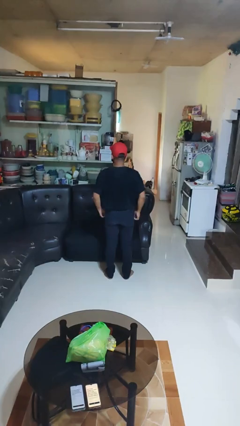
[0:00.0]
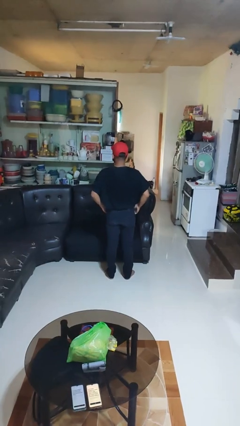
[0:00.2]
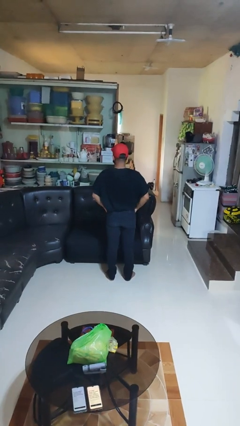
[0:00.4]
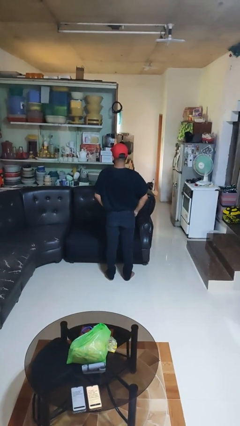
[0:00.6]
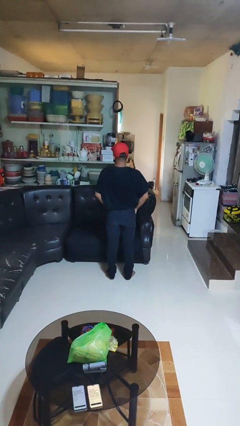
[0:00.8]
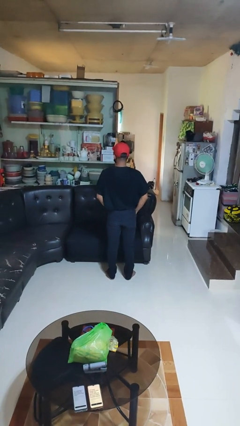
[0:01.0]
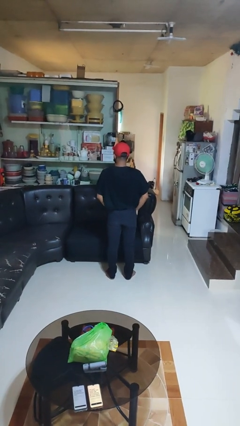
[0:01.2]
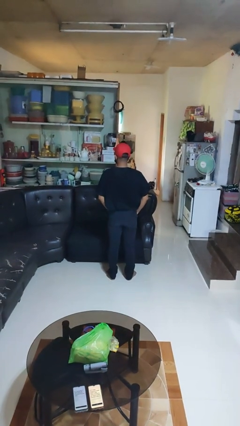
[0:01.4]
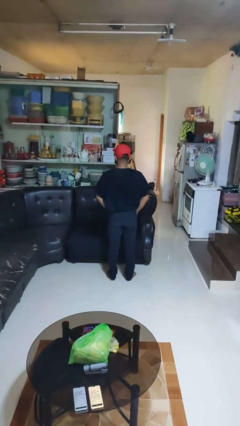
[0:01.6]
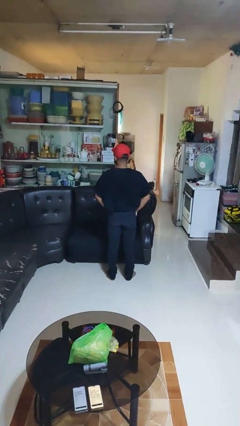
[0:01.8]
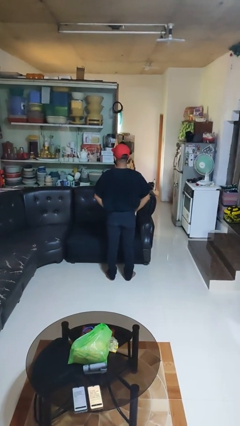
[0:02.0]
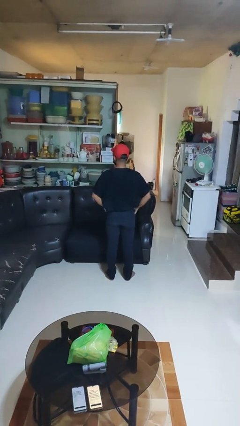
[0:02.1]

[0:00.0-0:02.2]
person puts hands in back pockets

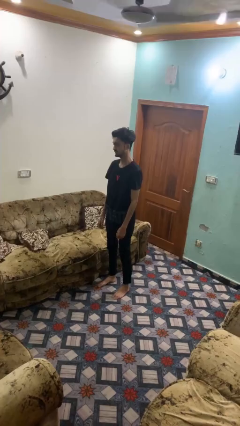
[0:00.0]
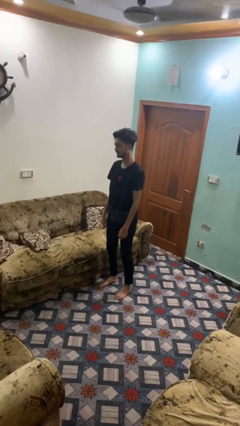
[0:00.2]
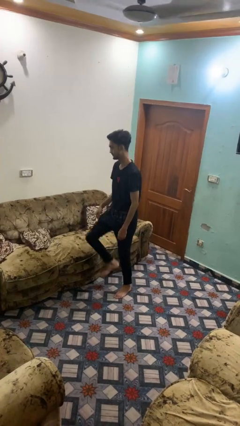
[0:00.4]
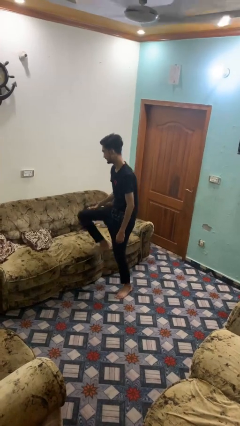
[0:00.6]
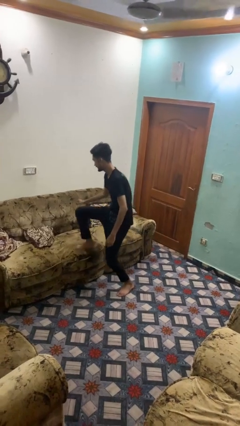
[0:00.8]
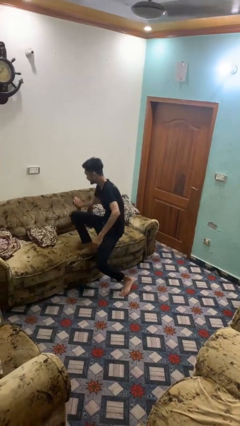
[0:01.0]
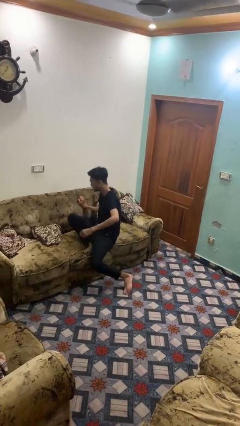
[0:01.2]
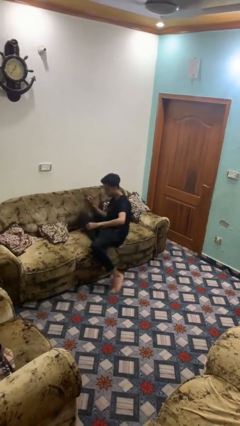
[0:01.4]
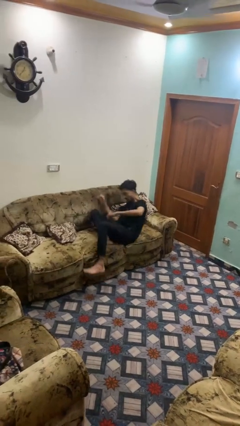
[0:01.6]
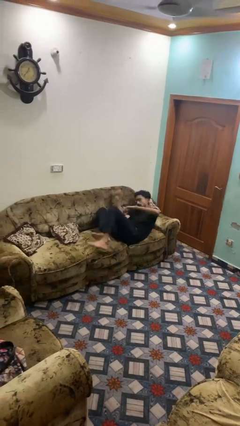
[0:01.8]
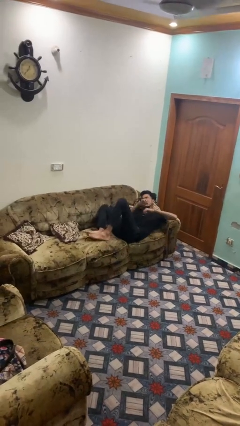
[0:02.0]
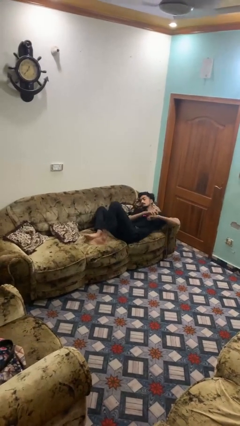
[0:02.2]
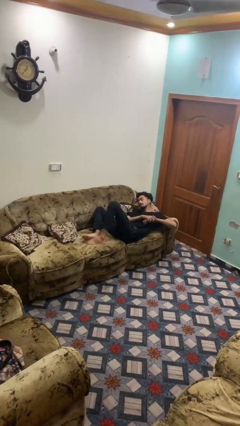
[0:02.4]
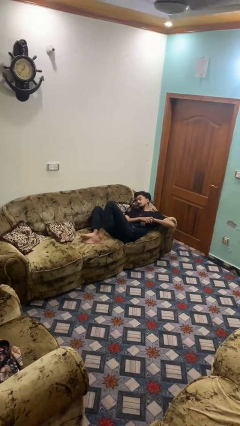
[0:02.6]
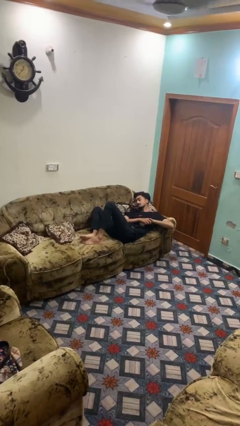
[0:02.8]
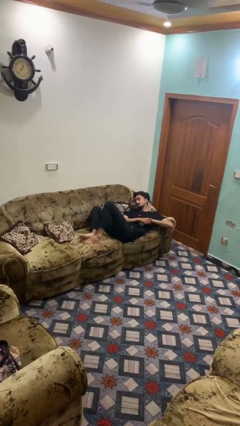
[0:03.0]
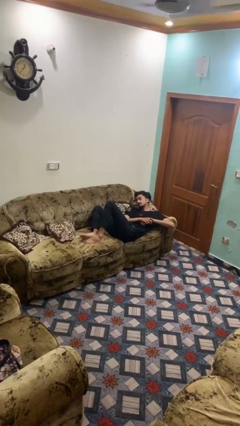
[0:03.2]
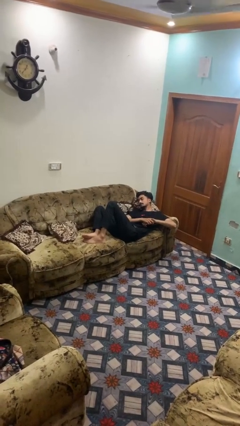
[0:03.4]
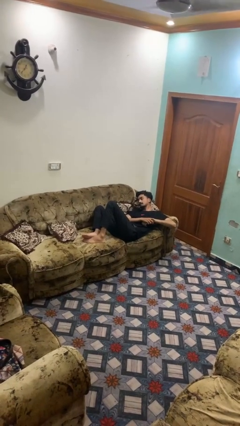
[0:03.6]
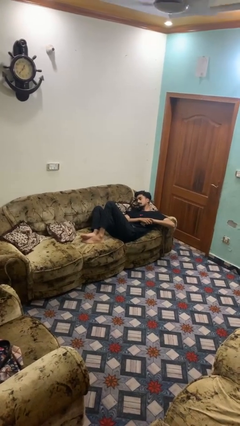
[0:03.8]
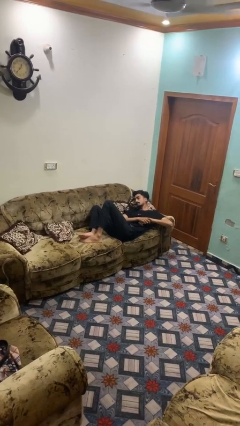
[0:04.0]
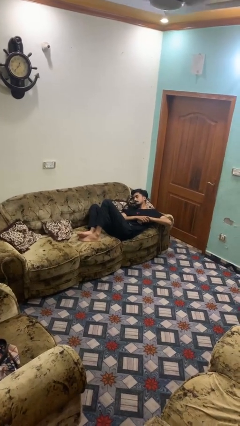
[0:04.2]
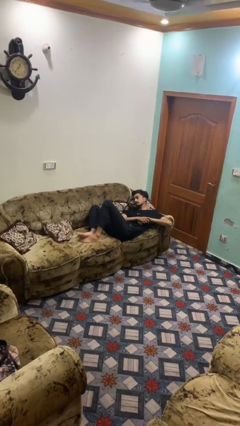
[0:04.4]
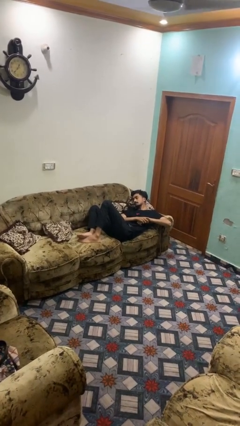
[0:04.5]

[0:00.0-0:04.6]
person lies down on couch

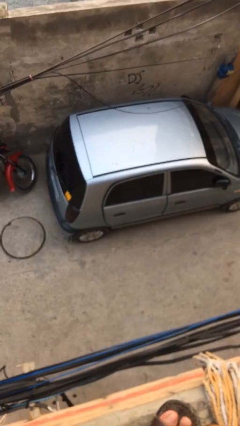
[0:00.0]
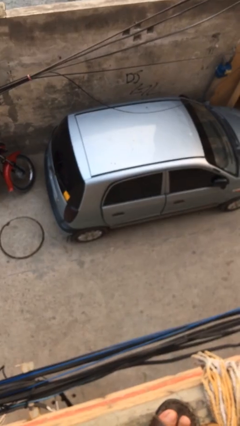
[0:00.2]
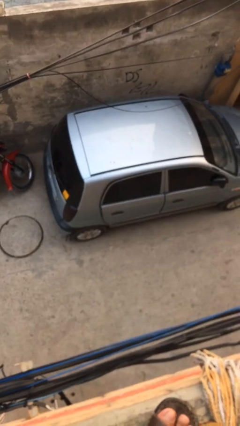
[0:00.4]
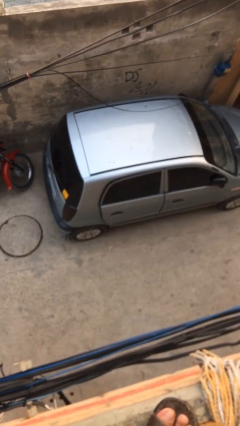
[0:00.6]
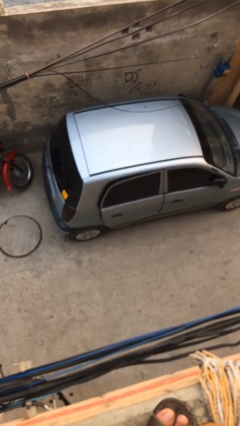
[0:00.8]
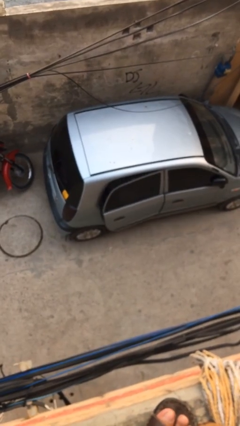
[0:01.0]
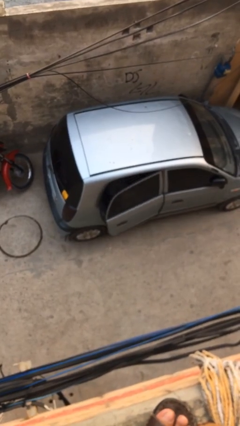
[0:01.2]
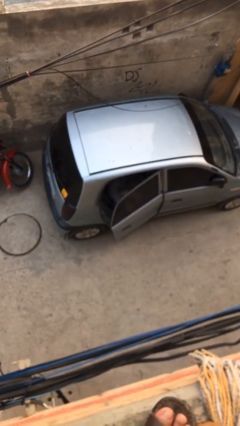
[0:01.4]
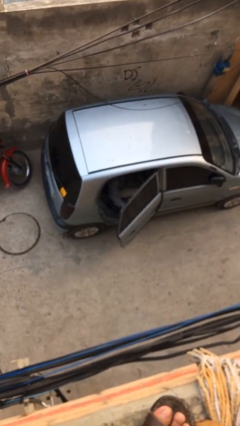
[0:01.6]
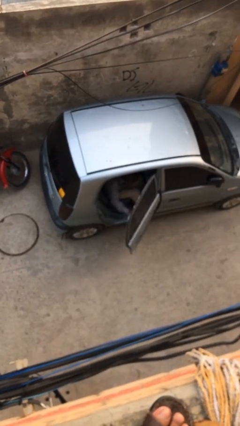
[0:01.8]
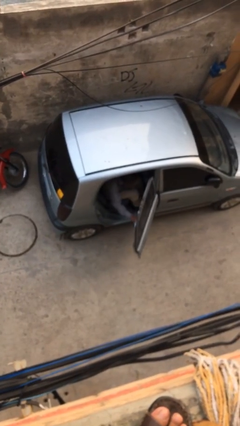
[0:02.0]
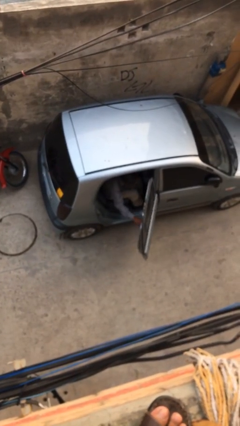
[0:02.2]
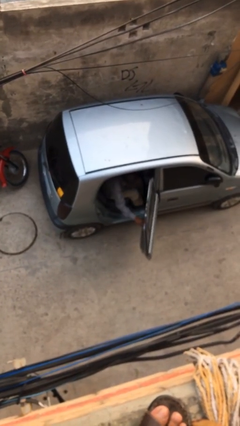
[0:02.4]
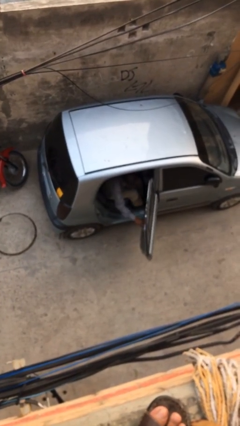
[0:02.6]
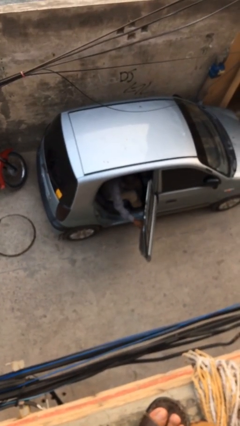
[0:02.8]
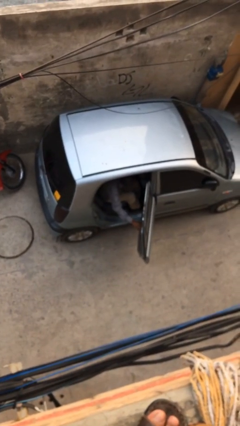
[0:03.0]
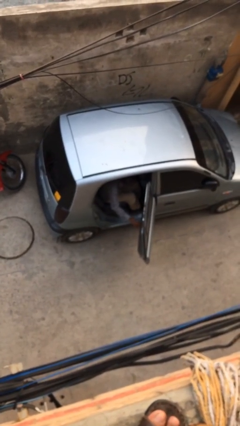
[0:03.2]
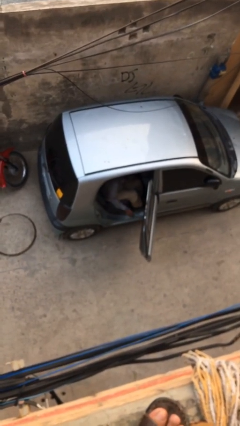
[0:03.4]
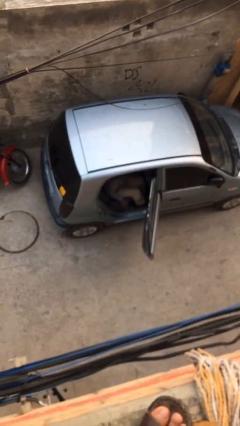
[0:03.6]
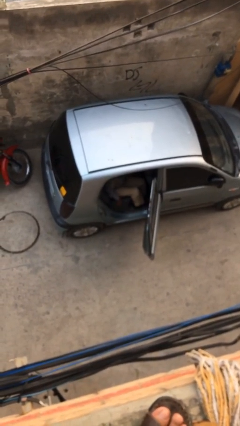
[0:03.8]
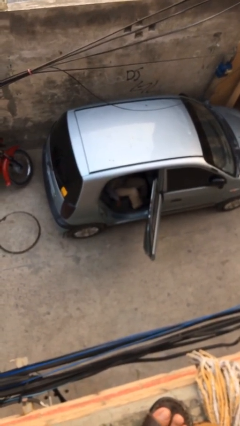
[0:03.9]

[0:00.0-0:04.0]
person opens car door

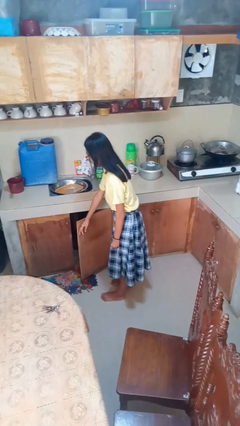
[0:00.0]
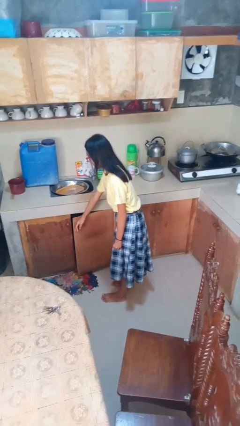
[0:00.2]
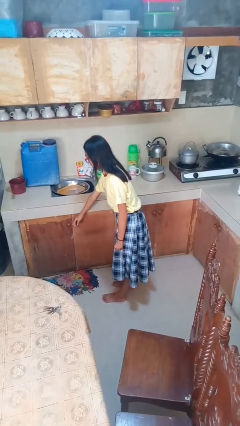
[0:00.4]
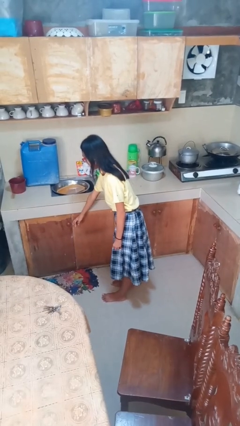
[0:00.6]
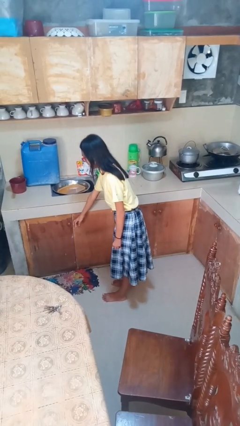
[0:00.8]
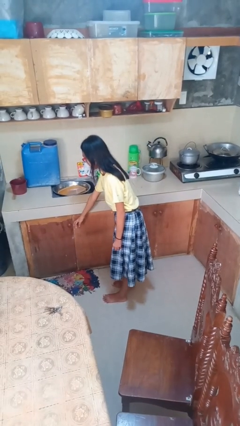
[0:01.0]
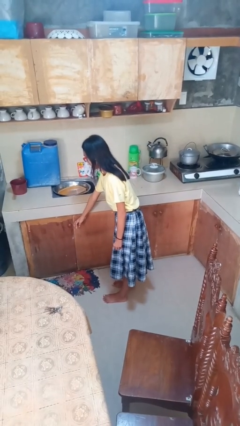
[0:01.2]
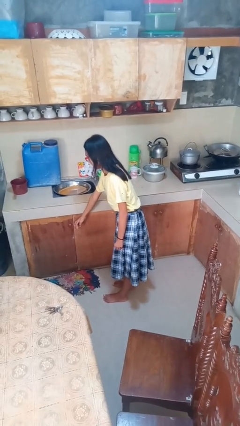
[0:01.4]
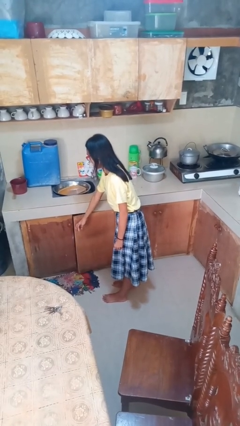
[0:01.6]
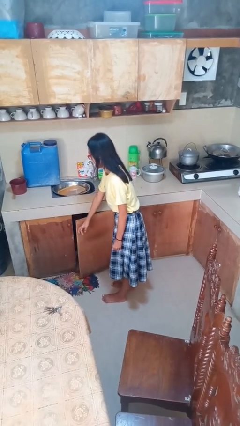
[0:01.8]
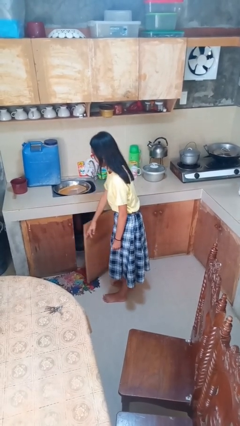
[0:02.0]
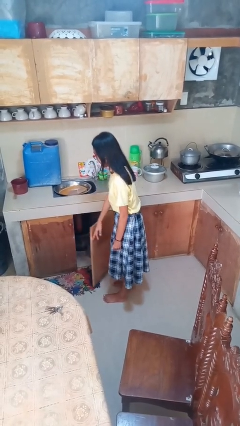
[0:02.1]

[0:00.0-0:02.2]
person closes cabinet

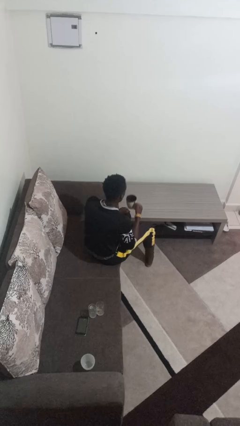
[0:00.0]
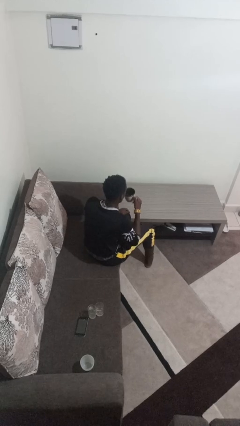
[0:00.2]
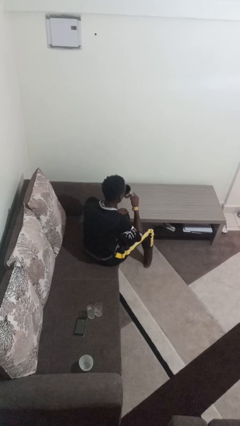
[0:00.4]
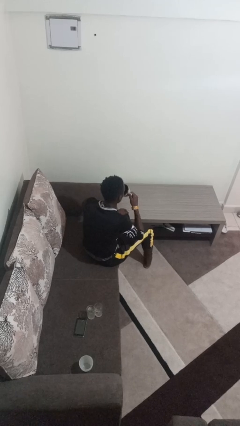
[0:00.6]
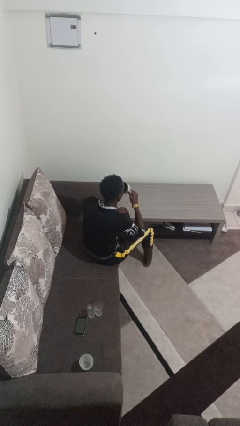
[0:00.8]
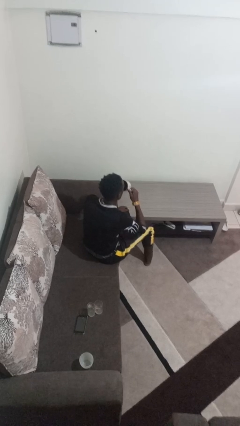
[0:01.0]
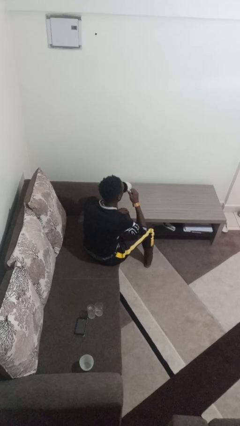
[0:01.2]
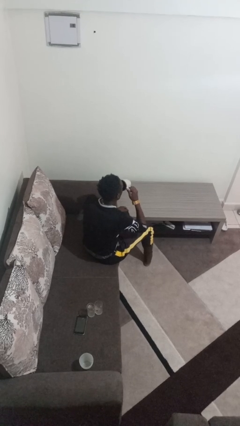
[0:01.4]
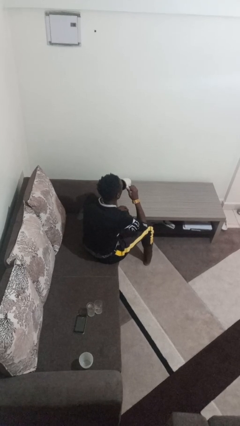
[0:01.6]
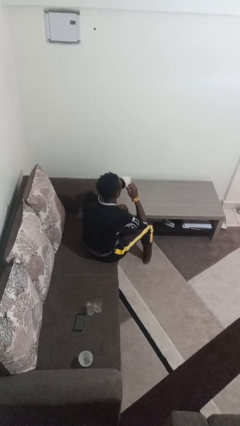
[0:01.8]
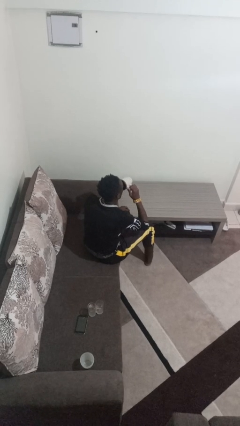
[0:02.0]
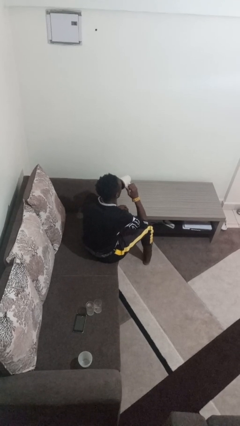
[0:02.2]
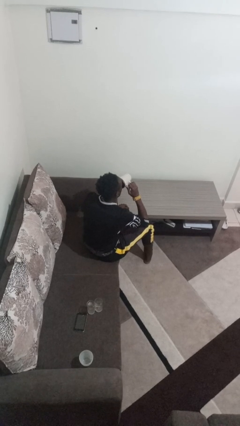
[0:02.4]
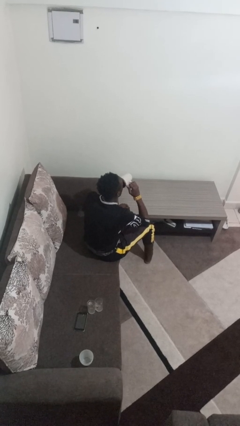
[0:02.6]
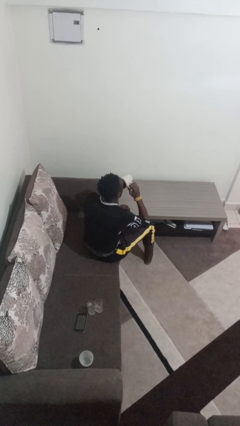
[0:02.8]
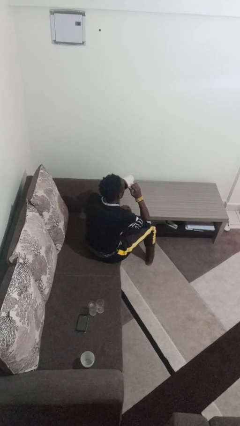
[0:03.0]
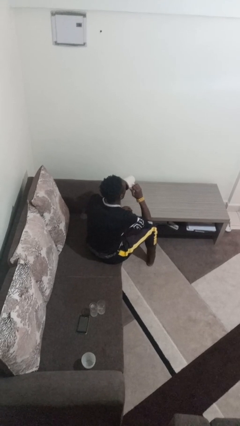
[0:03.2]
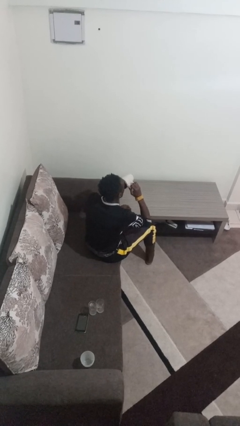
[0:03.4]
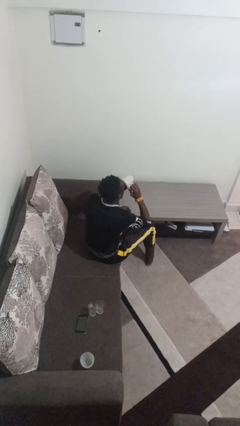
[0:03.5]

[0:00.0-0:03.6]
person drinks from mug

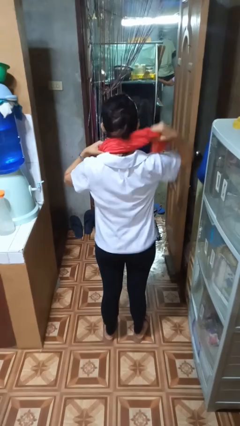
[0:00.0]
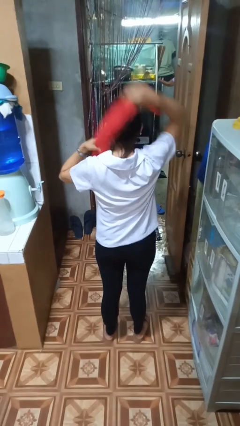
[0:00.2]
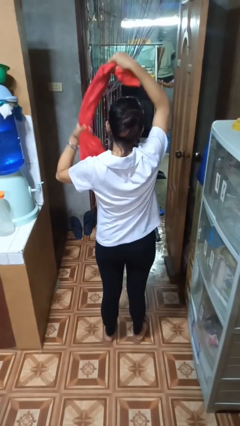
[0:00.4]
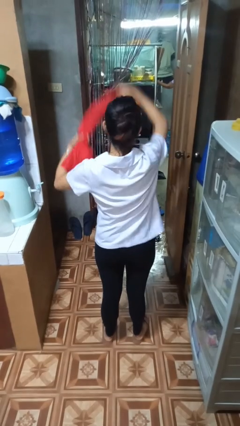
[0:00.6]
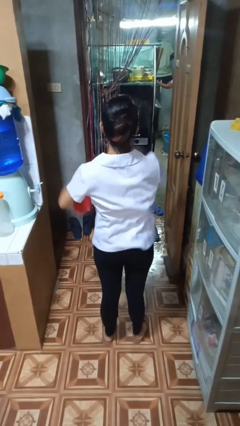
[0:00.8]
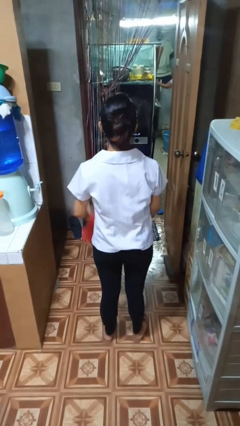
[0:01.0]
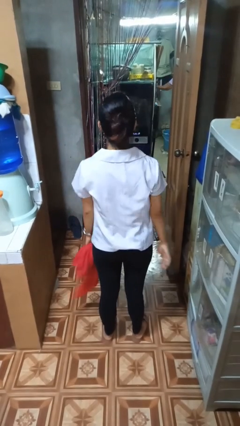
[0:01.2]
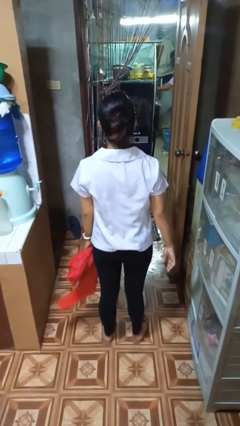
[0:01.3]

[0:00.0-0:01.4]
person takes off scarf
